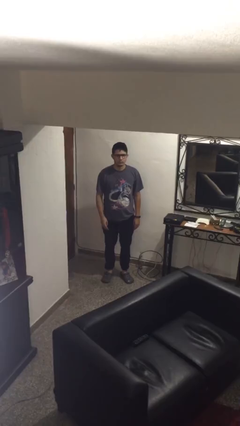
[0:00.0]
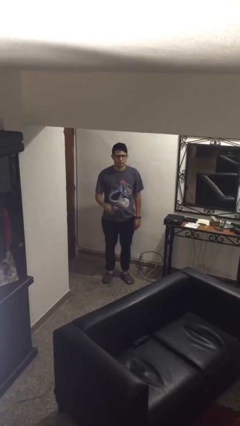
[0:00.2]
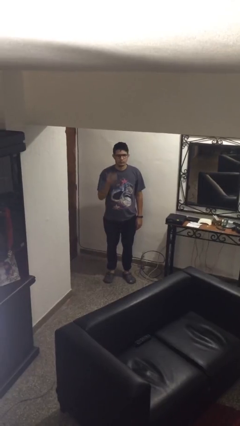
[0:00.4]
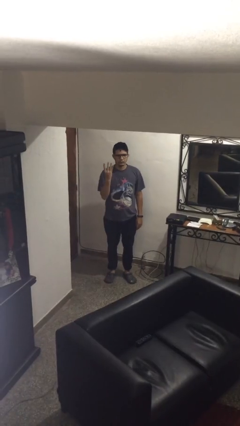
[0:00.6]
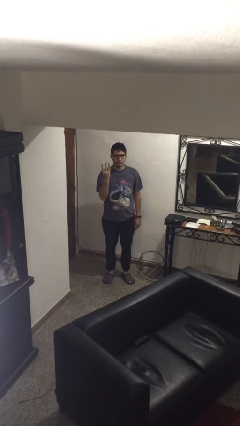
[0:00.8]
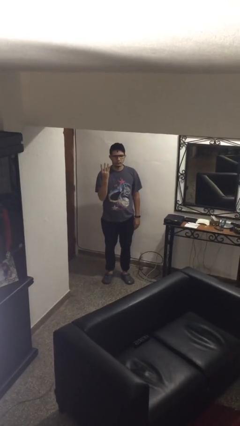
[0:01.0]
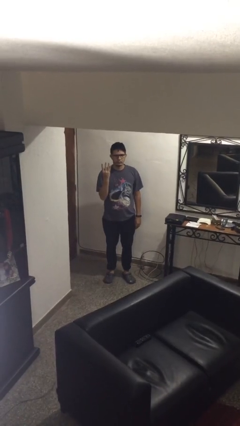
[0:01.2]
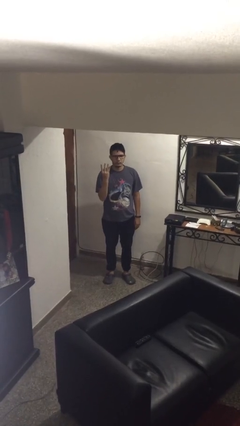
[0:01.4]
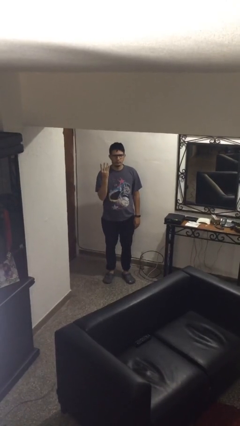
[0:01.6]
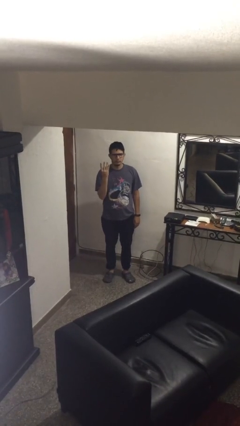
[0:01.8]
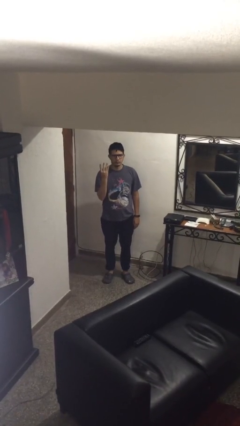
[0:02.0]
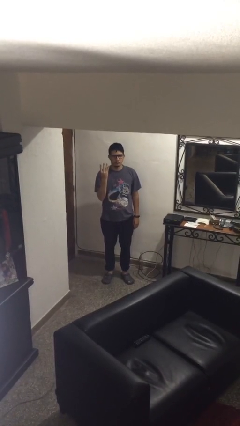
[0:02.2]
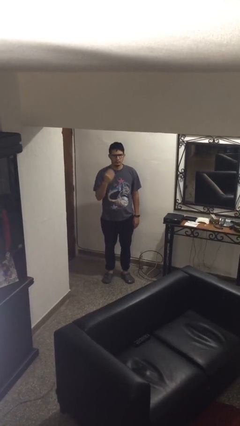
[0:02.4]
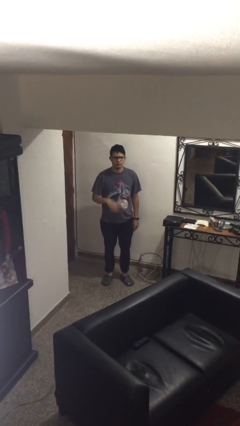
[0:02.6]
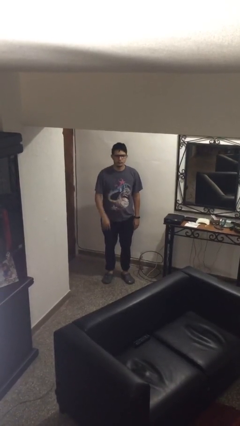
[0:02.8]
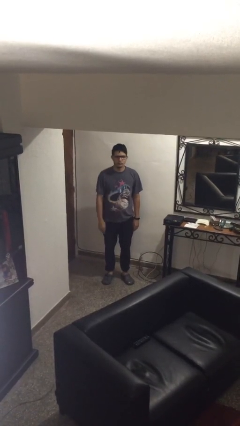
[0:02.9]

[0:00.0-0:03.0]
person gestures number four

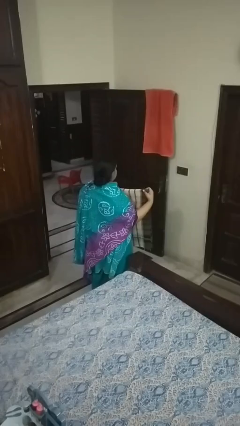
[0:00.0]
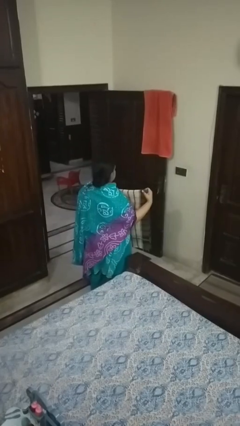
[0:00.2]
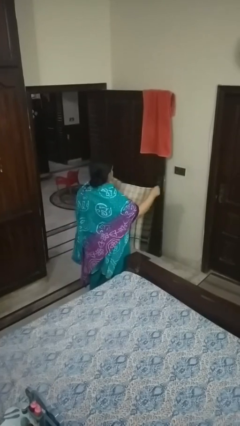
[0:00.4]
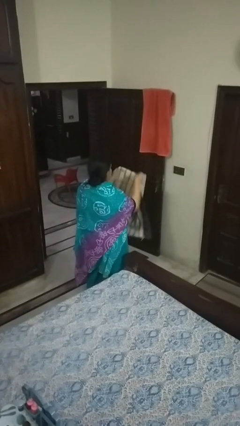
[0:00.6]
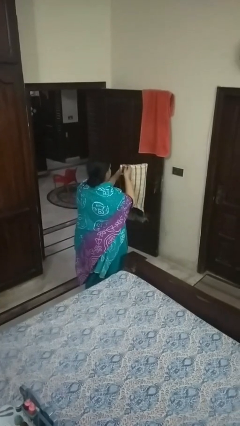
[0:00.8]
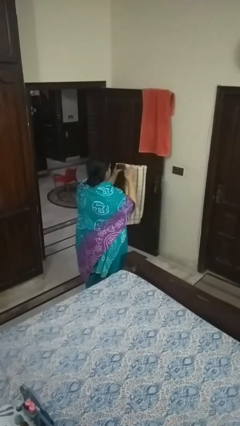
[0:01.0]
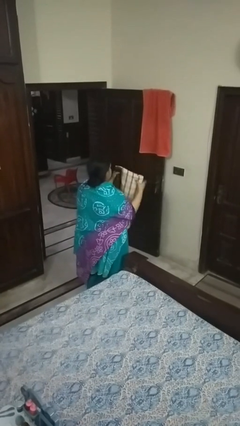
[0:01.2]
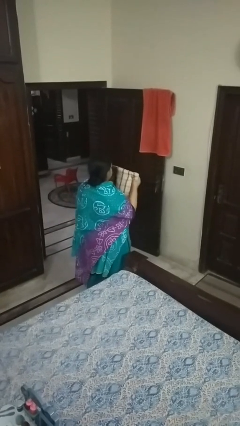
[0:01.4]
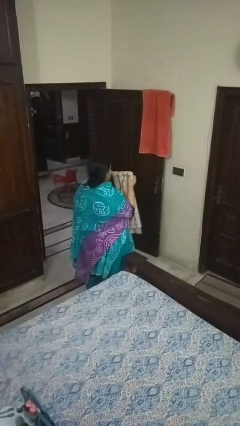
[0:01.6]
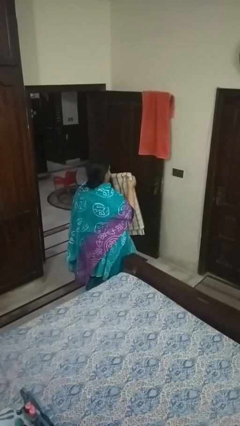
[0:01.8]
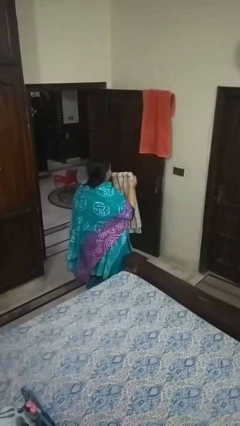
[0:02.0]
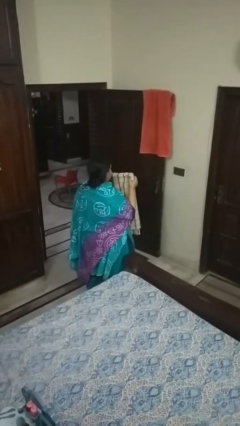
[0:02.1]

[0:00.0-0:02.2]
person folds blanket

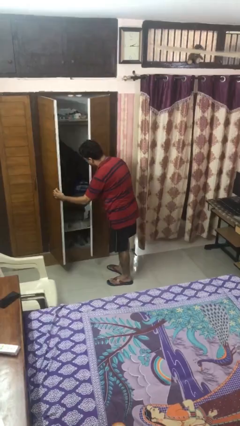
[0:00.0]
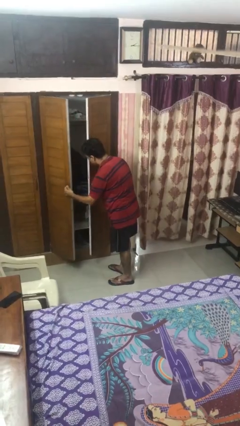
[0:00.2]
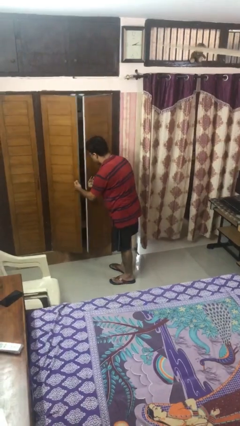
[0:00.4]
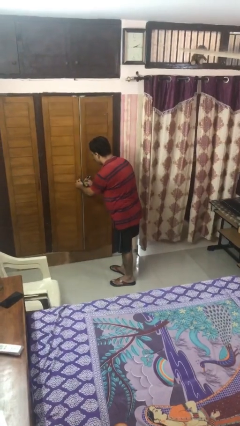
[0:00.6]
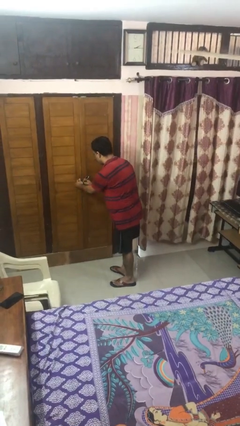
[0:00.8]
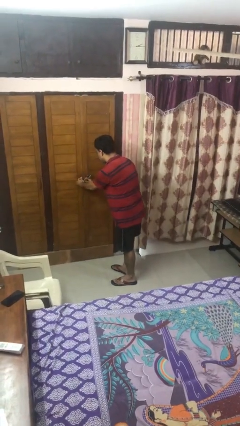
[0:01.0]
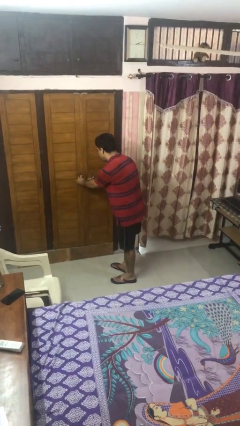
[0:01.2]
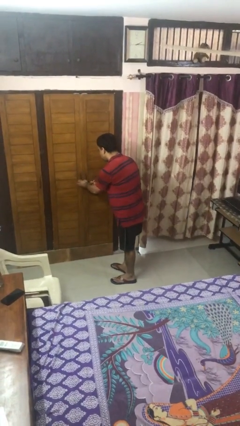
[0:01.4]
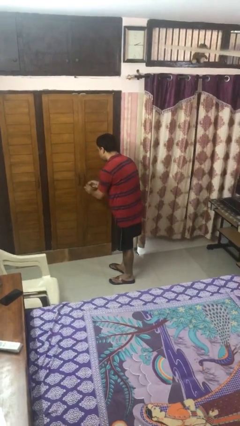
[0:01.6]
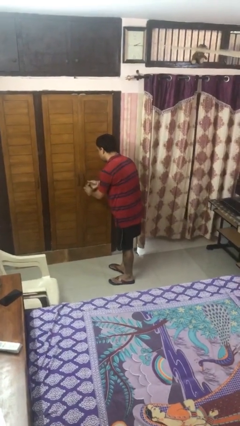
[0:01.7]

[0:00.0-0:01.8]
person closes facility door

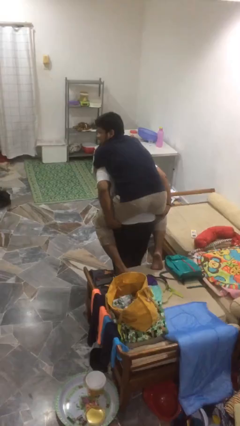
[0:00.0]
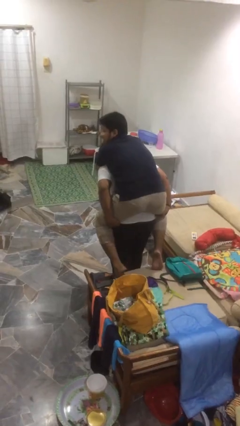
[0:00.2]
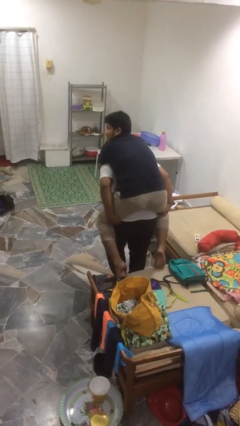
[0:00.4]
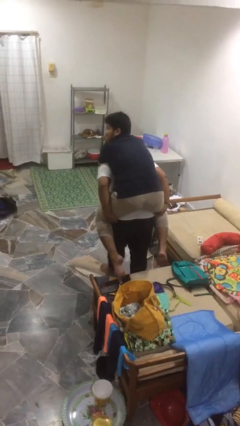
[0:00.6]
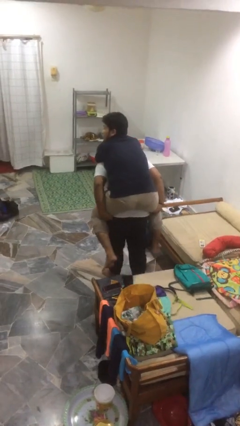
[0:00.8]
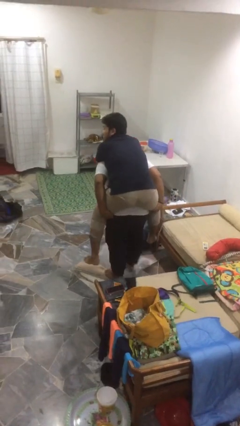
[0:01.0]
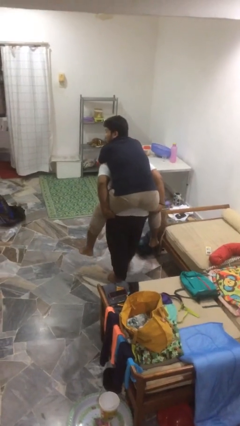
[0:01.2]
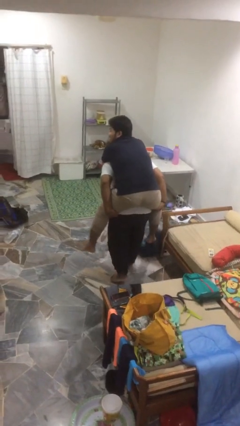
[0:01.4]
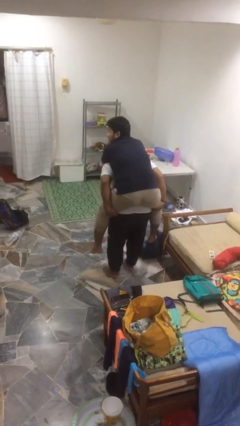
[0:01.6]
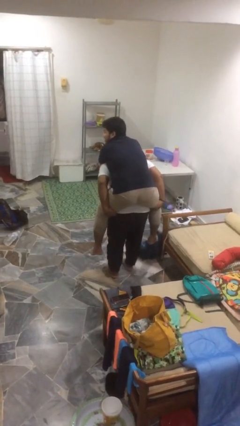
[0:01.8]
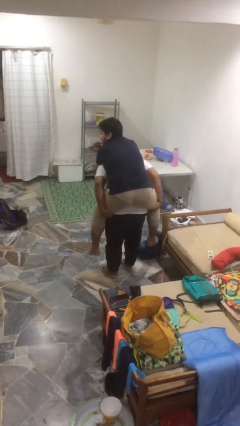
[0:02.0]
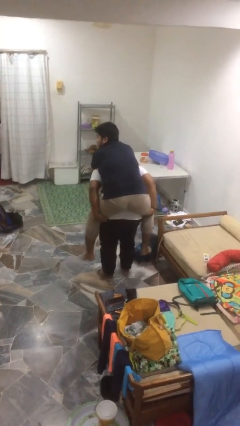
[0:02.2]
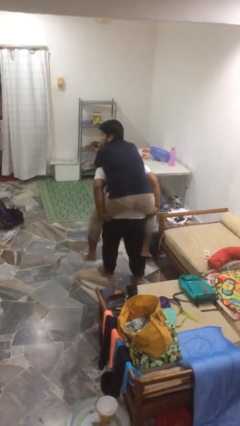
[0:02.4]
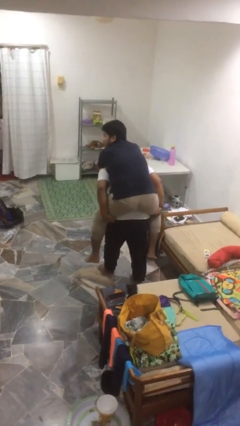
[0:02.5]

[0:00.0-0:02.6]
person carries person on back

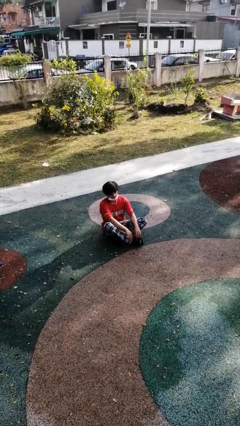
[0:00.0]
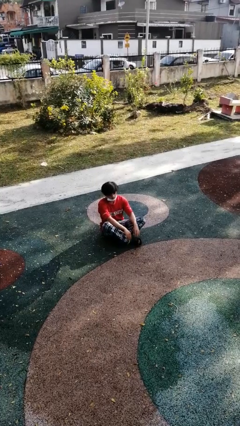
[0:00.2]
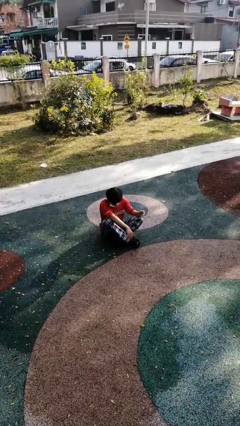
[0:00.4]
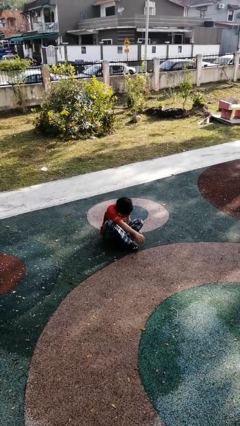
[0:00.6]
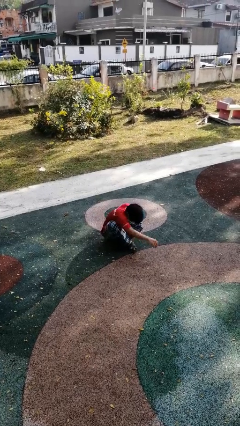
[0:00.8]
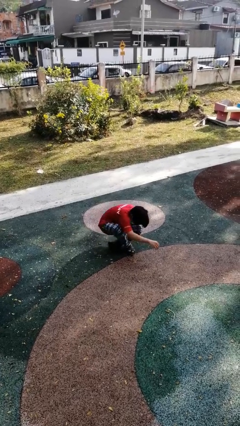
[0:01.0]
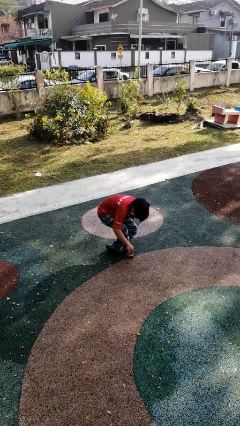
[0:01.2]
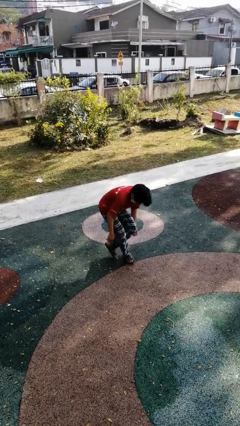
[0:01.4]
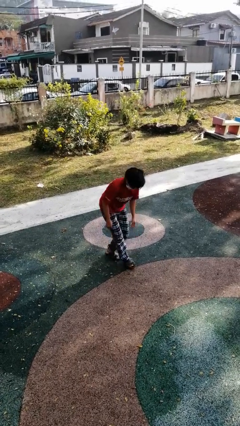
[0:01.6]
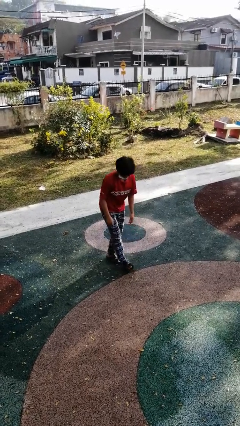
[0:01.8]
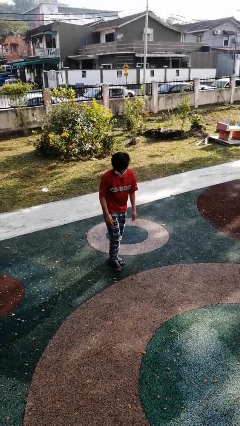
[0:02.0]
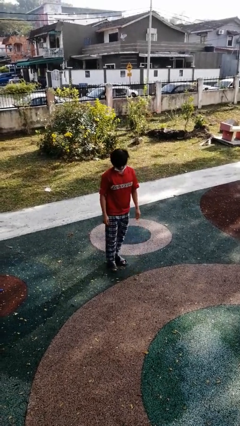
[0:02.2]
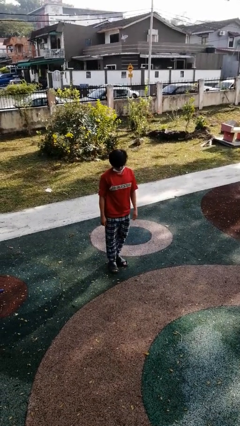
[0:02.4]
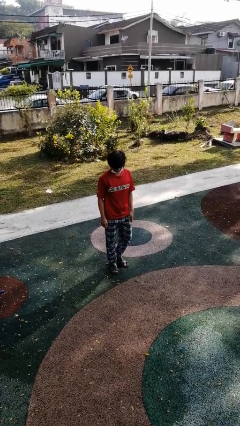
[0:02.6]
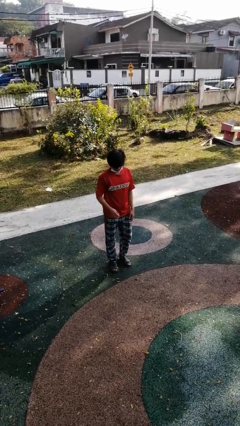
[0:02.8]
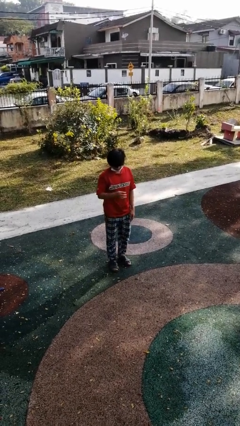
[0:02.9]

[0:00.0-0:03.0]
person stands up from floor

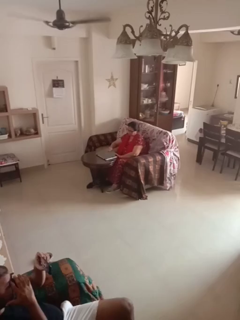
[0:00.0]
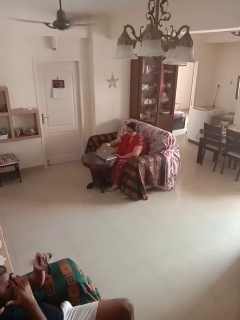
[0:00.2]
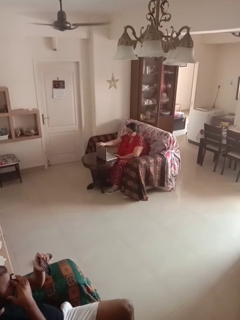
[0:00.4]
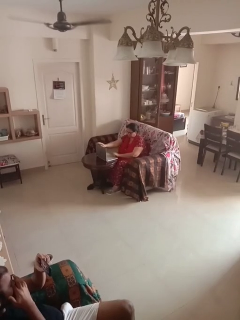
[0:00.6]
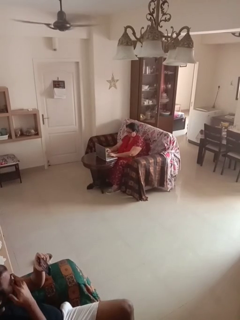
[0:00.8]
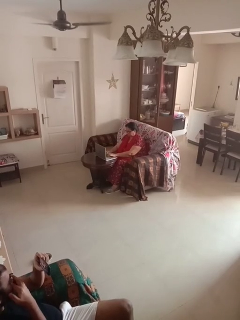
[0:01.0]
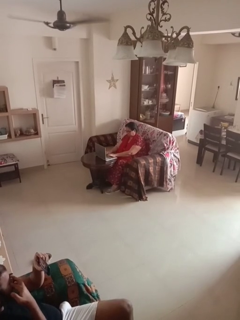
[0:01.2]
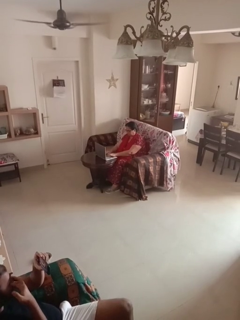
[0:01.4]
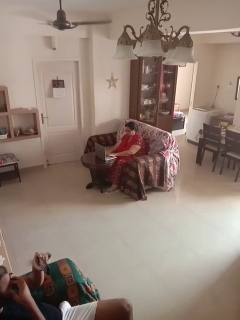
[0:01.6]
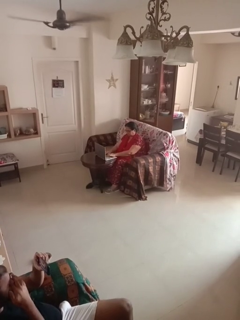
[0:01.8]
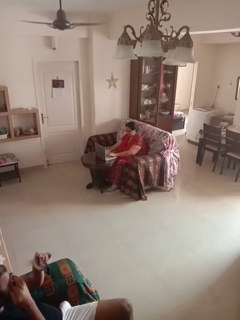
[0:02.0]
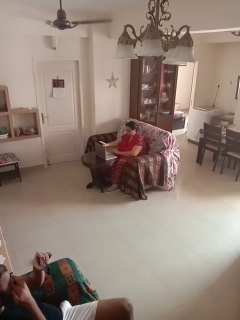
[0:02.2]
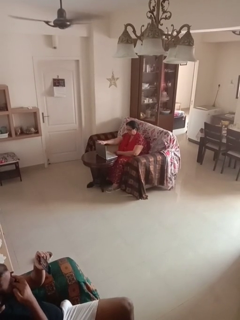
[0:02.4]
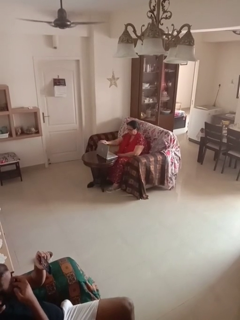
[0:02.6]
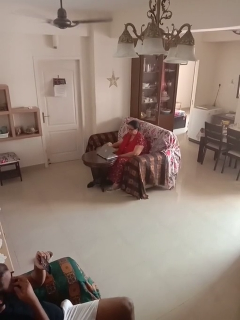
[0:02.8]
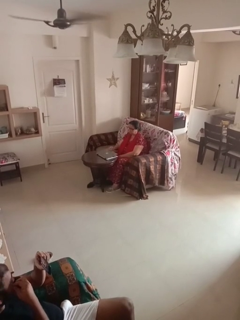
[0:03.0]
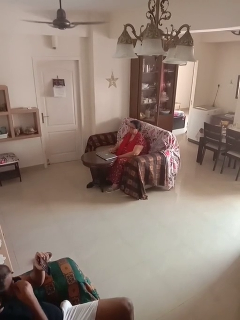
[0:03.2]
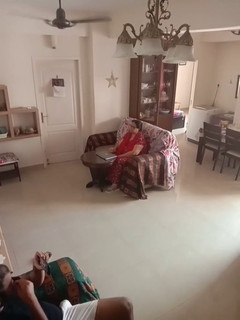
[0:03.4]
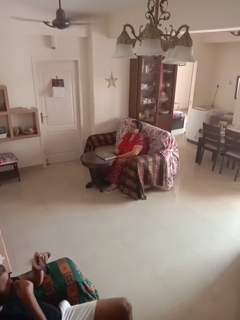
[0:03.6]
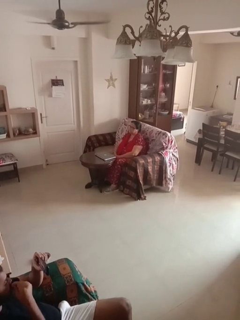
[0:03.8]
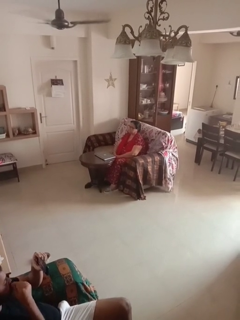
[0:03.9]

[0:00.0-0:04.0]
person interacts with laptop

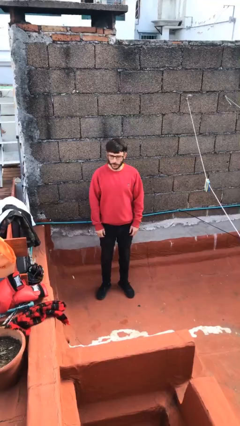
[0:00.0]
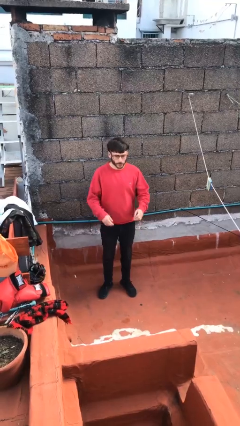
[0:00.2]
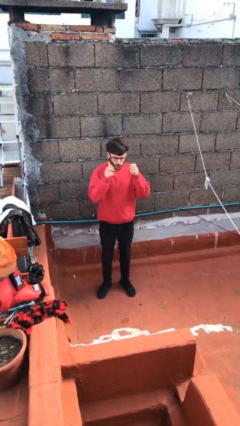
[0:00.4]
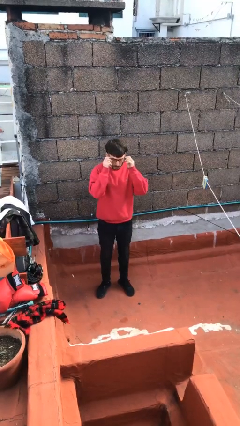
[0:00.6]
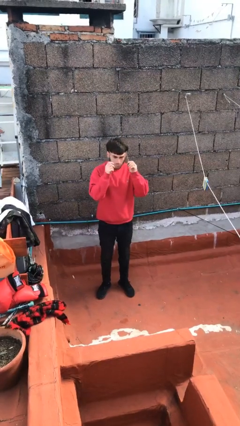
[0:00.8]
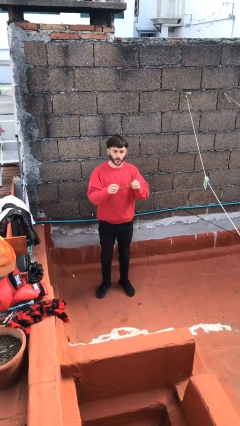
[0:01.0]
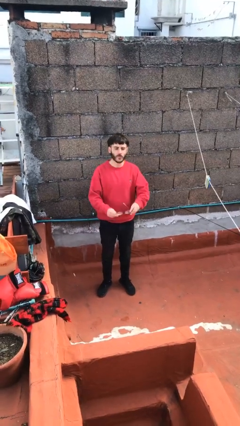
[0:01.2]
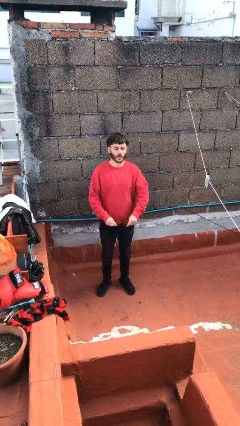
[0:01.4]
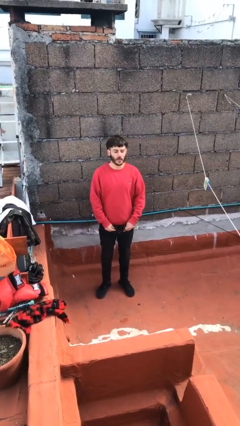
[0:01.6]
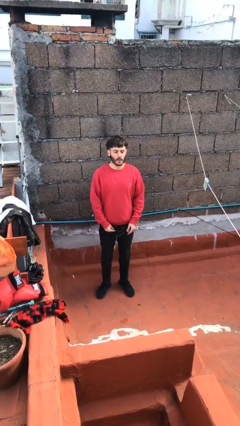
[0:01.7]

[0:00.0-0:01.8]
person takes off glasses
